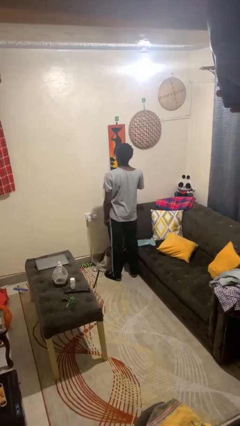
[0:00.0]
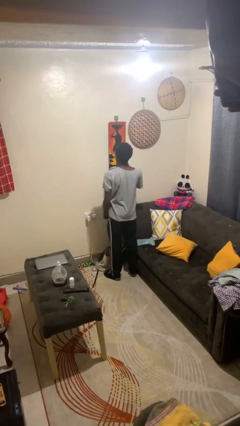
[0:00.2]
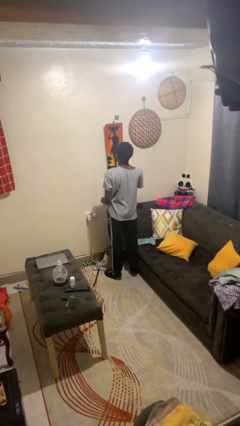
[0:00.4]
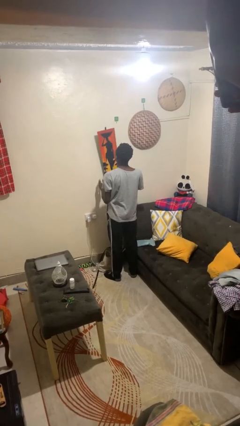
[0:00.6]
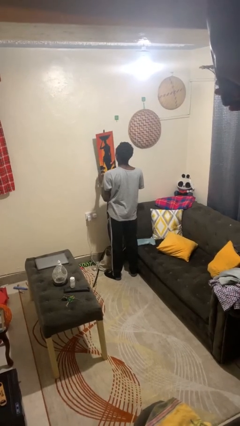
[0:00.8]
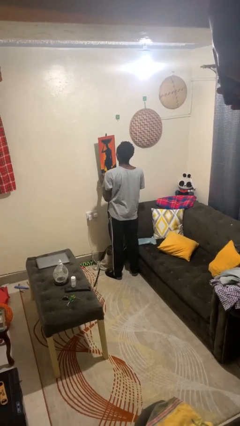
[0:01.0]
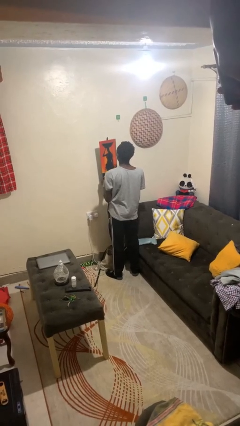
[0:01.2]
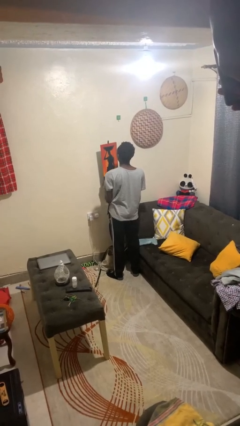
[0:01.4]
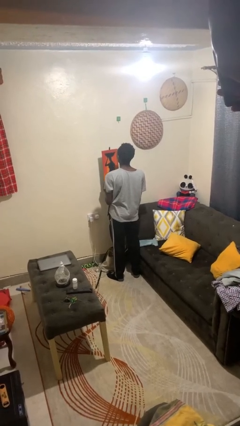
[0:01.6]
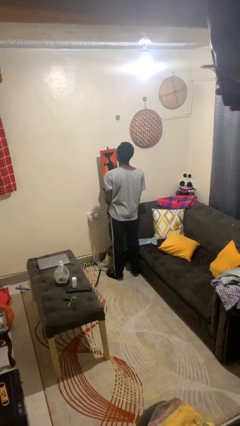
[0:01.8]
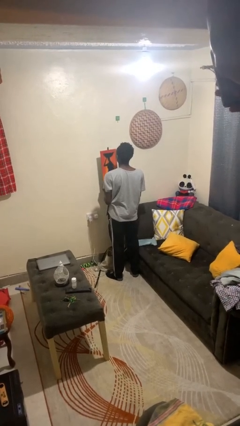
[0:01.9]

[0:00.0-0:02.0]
person takes down picture frame

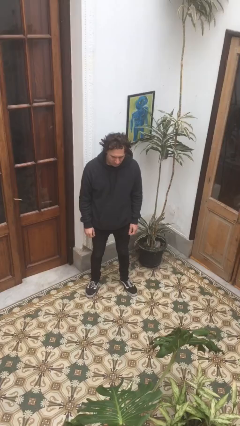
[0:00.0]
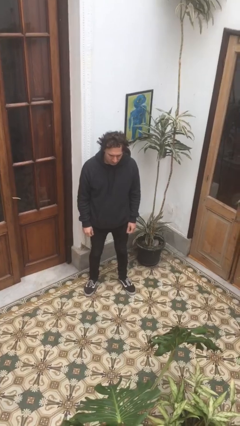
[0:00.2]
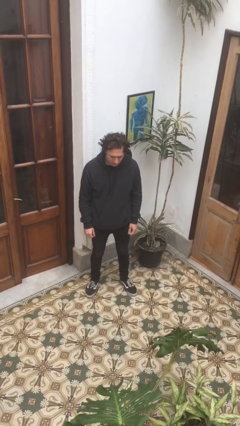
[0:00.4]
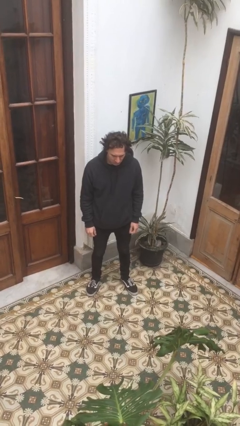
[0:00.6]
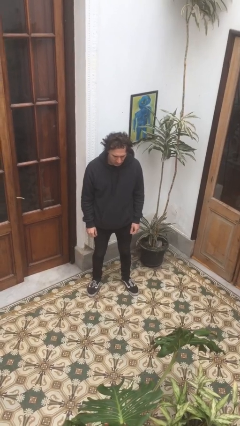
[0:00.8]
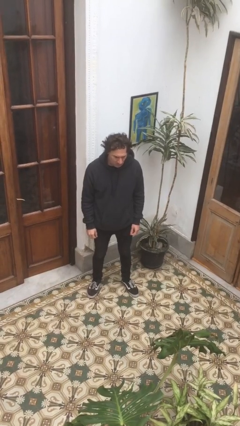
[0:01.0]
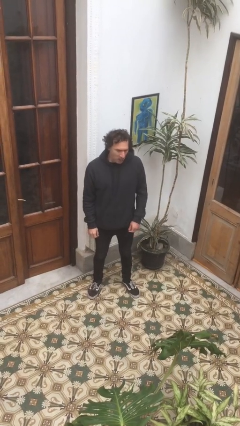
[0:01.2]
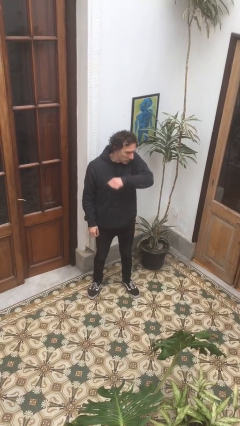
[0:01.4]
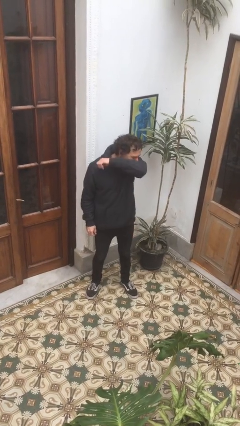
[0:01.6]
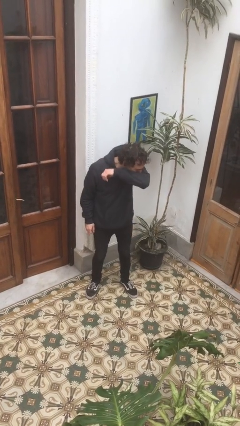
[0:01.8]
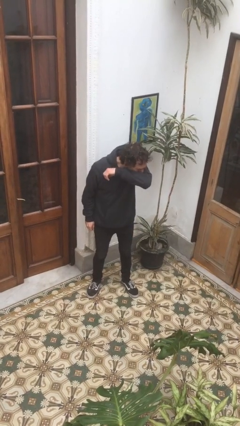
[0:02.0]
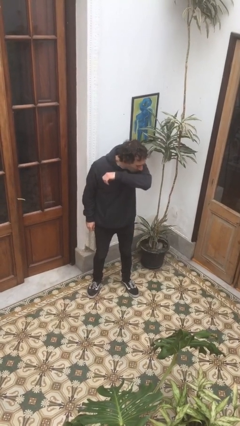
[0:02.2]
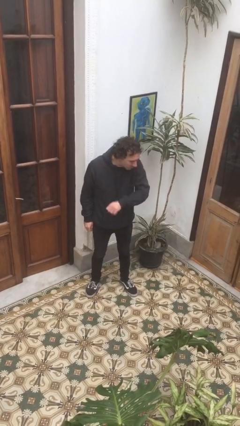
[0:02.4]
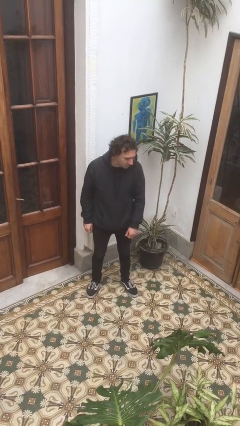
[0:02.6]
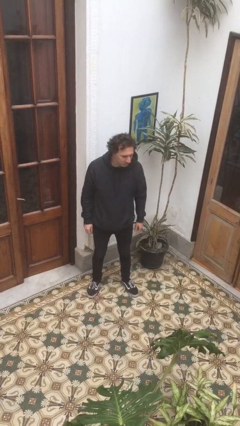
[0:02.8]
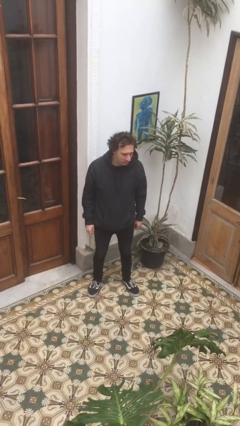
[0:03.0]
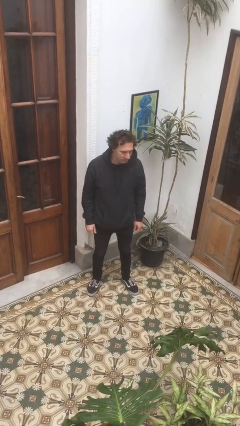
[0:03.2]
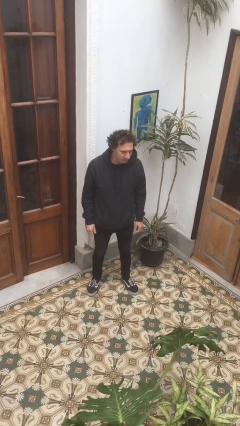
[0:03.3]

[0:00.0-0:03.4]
person sneezes into arm

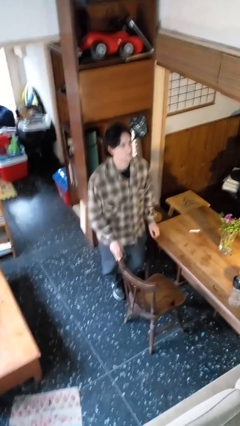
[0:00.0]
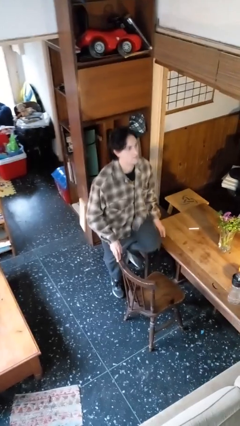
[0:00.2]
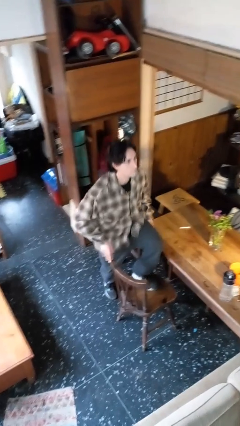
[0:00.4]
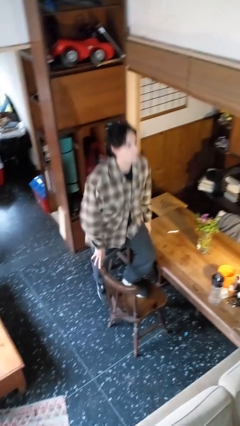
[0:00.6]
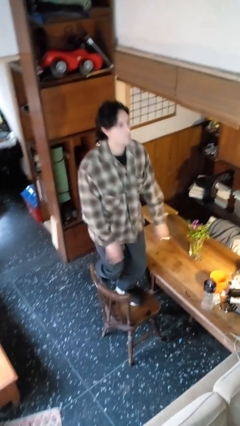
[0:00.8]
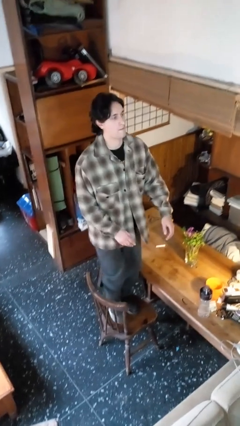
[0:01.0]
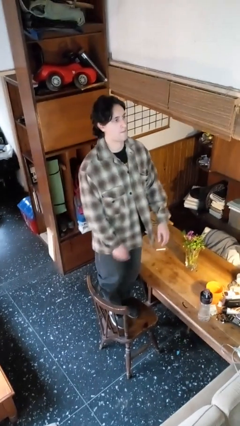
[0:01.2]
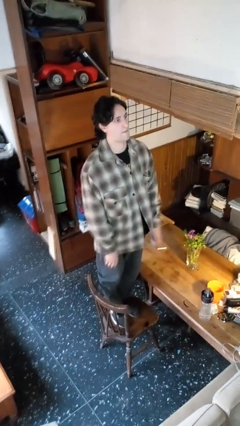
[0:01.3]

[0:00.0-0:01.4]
person climbs on chair

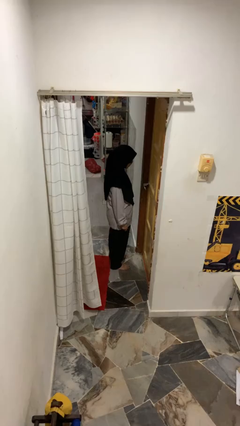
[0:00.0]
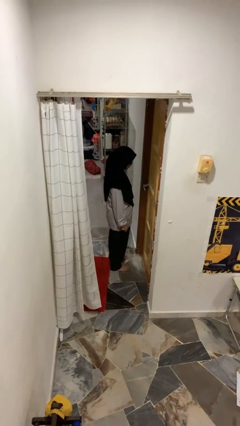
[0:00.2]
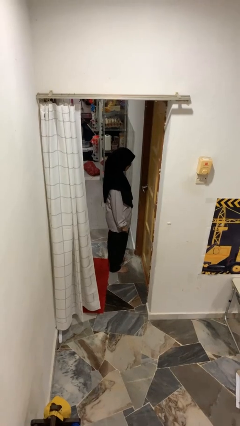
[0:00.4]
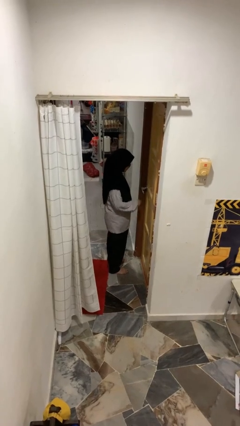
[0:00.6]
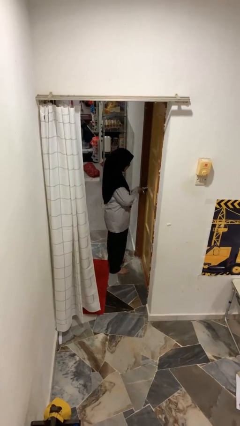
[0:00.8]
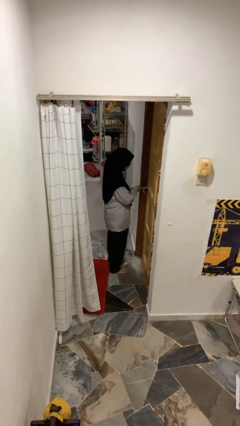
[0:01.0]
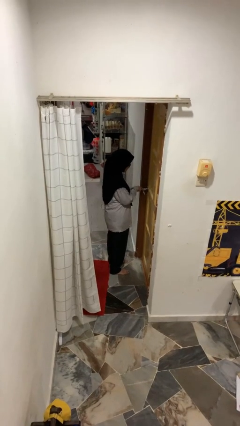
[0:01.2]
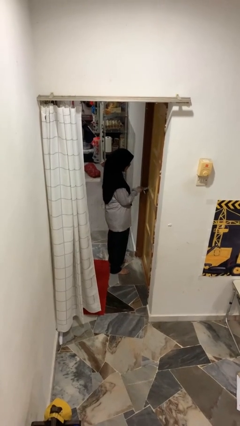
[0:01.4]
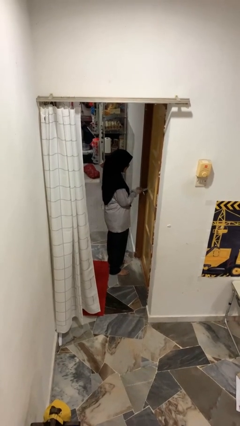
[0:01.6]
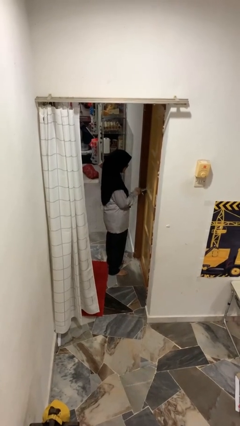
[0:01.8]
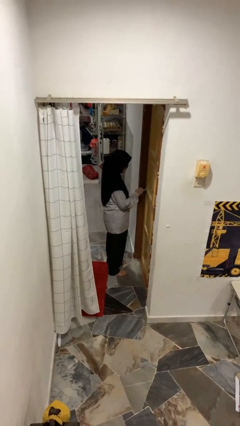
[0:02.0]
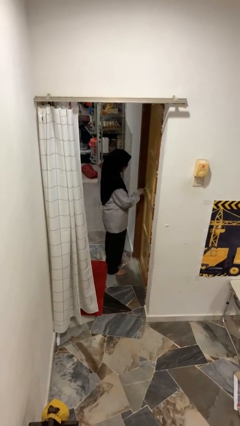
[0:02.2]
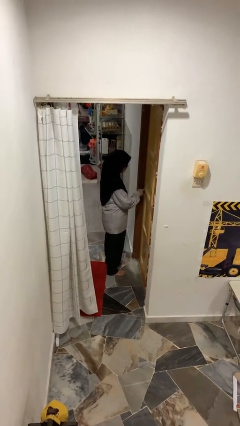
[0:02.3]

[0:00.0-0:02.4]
person unlocks door with keys

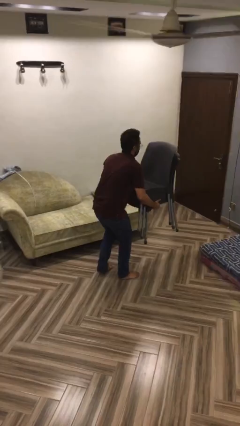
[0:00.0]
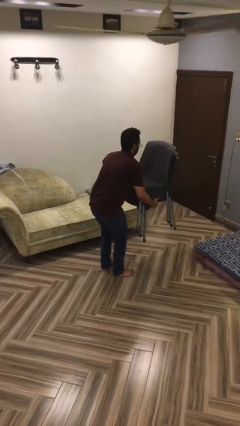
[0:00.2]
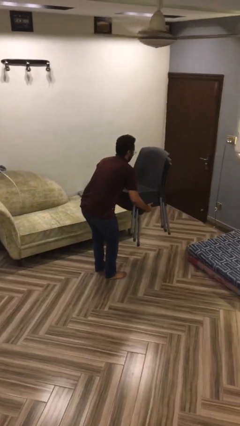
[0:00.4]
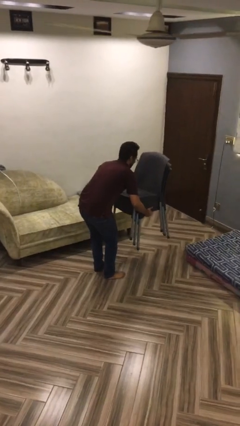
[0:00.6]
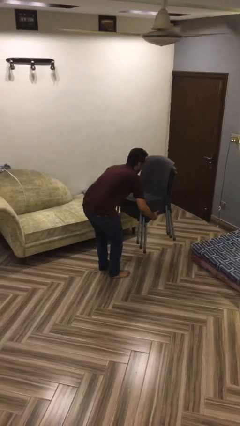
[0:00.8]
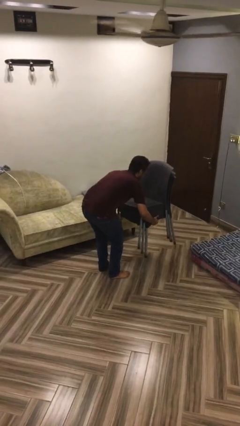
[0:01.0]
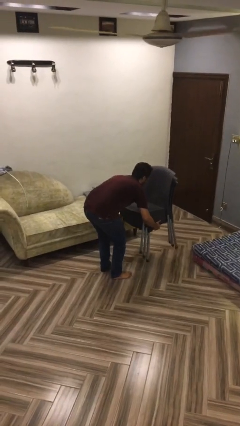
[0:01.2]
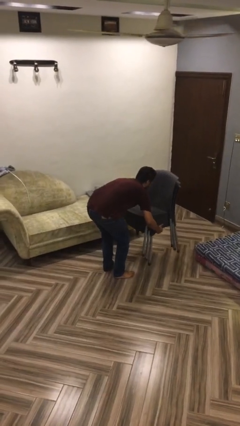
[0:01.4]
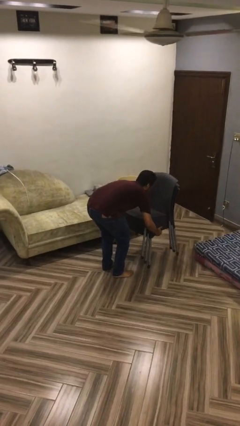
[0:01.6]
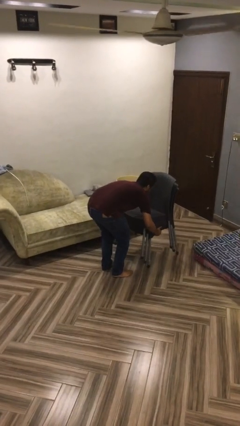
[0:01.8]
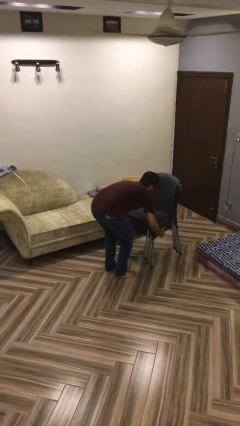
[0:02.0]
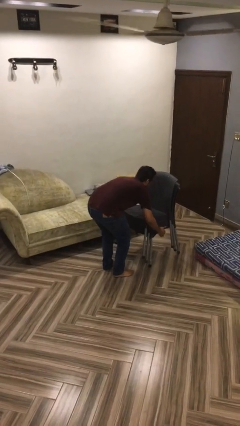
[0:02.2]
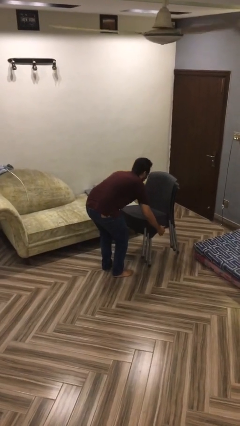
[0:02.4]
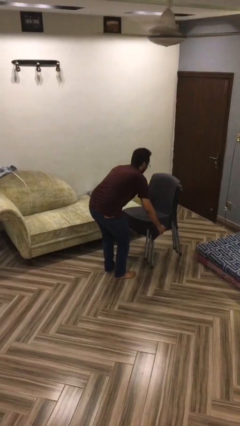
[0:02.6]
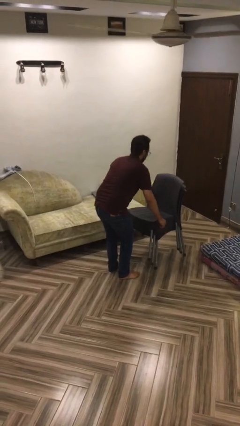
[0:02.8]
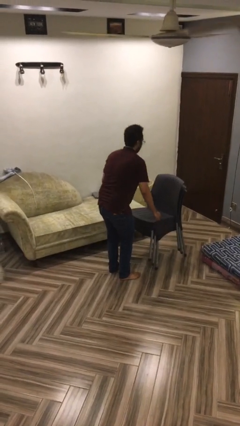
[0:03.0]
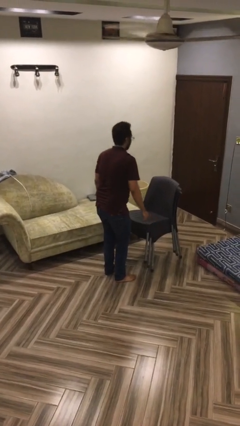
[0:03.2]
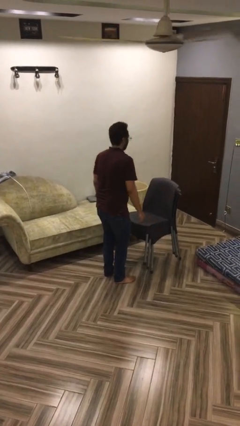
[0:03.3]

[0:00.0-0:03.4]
person puts down object on floor

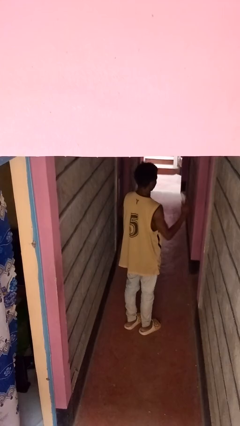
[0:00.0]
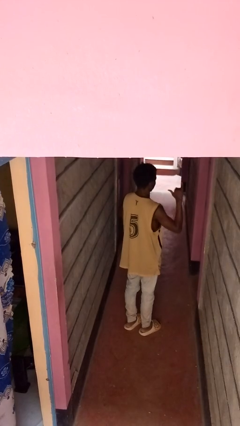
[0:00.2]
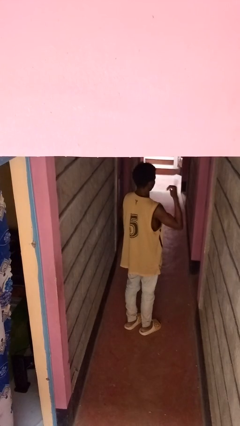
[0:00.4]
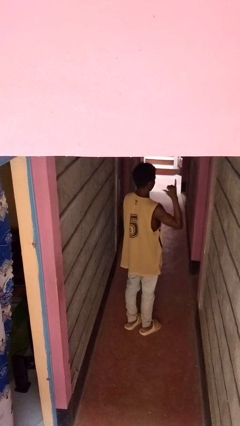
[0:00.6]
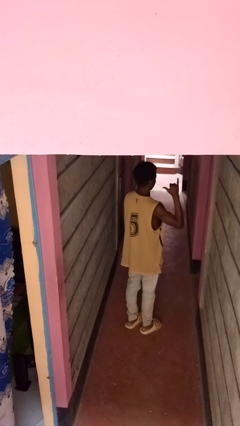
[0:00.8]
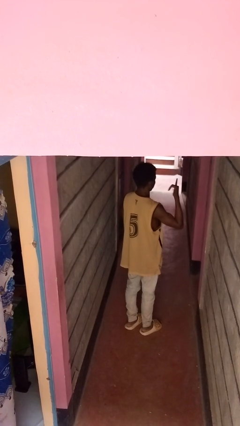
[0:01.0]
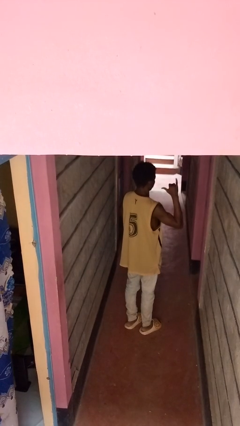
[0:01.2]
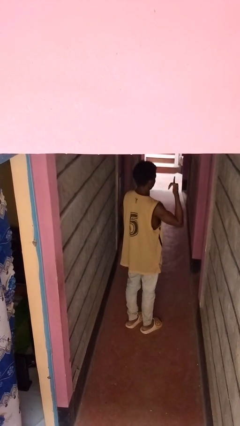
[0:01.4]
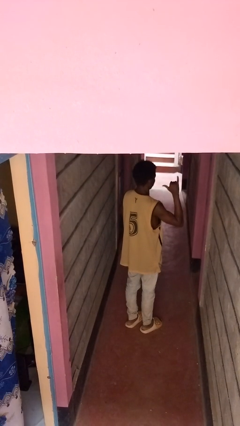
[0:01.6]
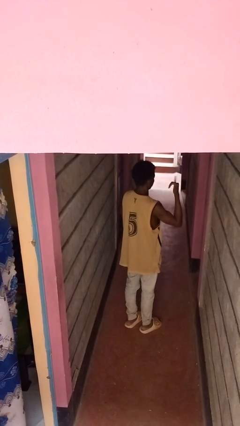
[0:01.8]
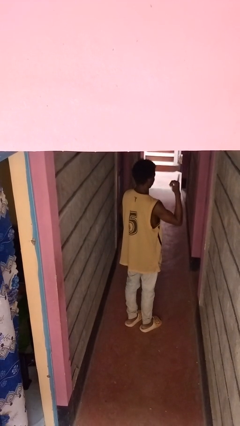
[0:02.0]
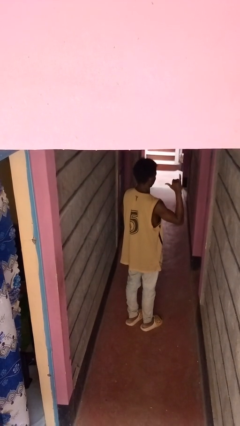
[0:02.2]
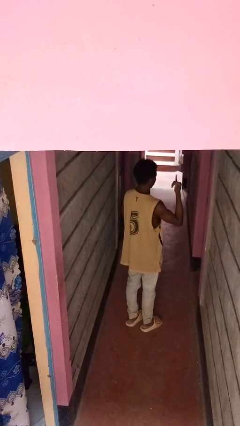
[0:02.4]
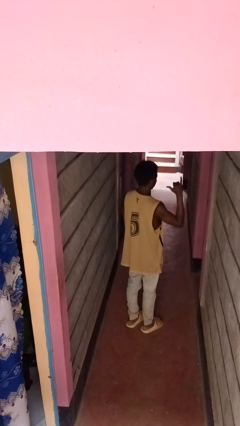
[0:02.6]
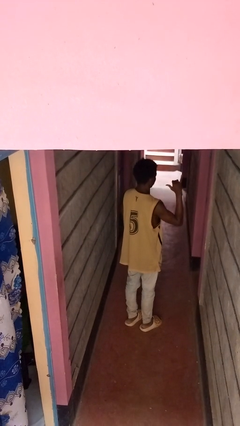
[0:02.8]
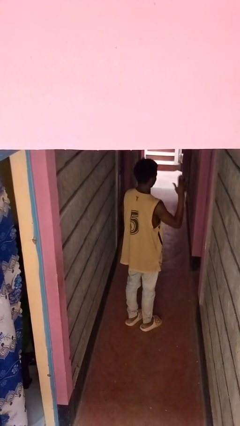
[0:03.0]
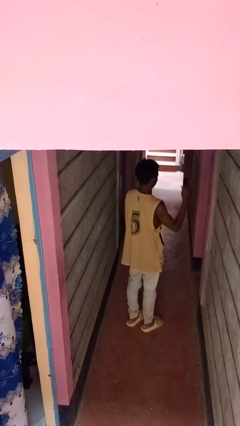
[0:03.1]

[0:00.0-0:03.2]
person gestures hang loose

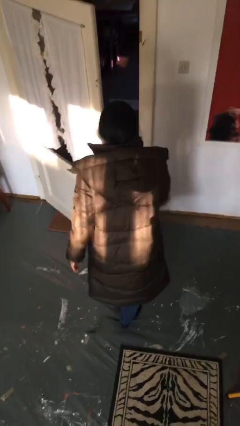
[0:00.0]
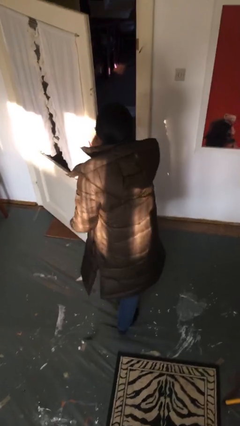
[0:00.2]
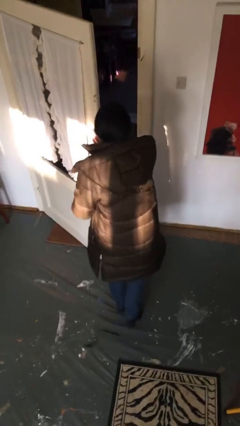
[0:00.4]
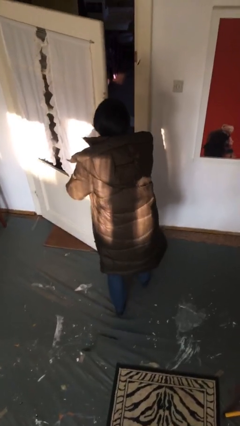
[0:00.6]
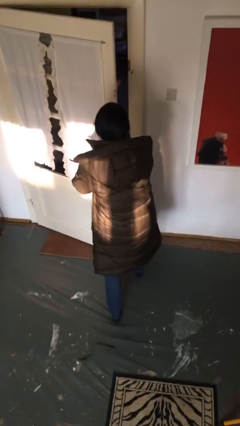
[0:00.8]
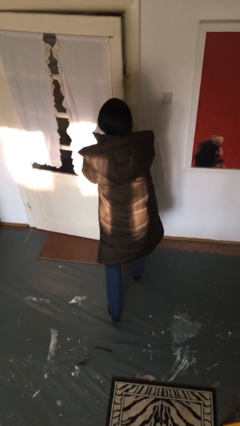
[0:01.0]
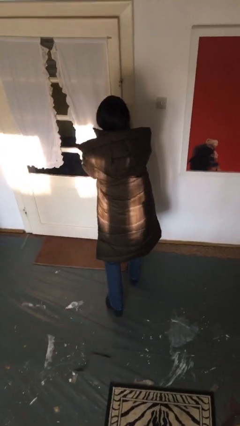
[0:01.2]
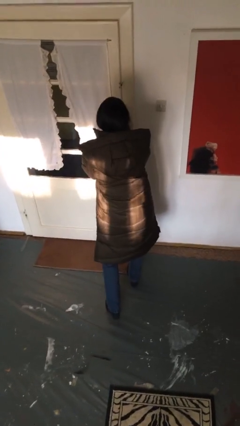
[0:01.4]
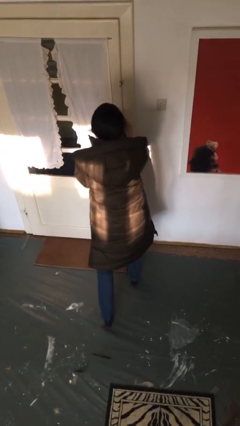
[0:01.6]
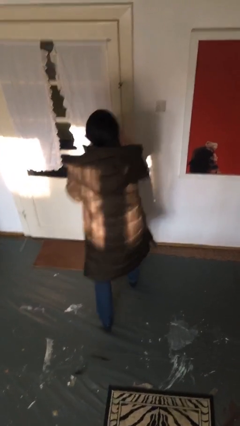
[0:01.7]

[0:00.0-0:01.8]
person closes facility door
